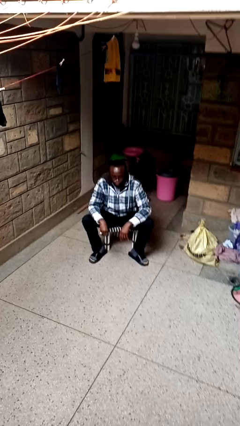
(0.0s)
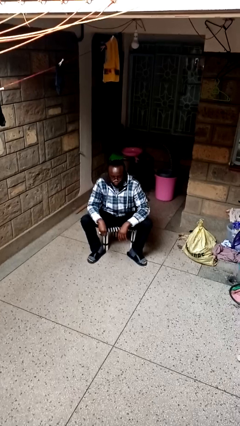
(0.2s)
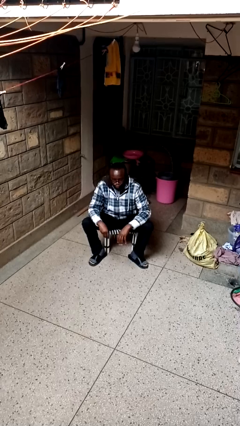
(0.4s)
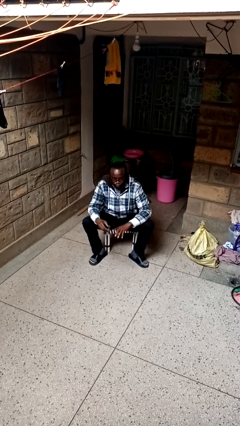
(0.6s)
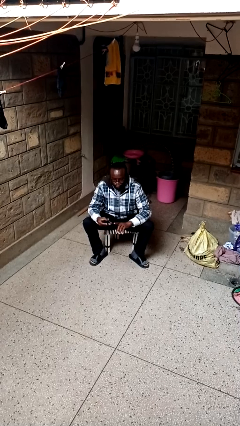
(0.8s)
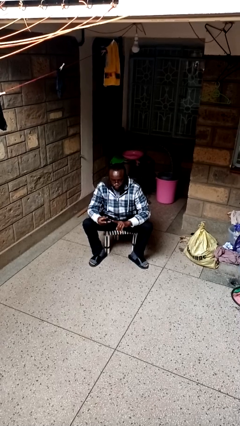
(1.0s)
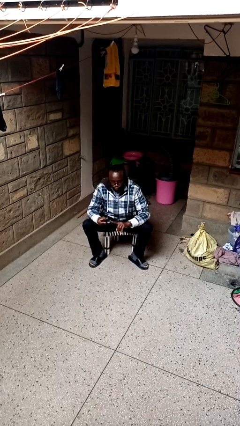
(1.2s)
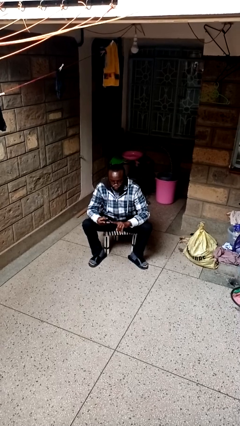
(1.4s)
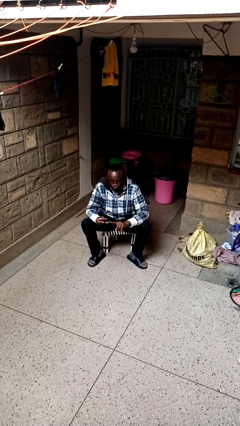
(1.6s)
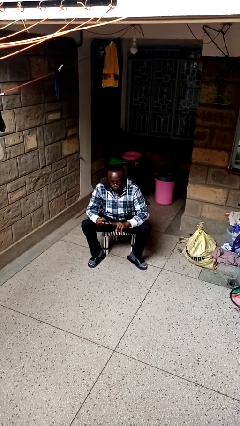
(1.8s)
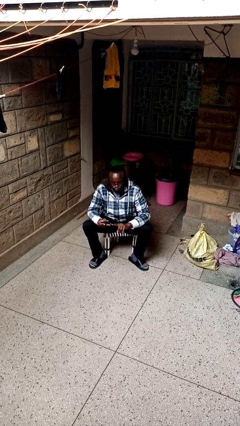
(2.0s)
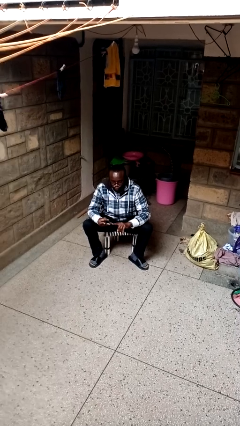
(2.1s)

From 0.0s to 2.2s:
person clips fingernails

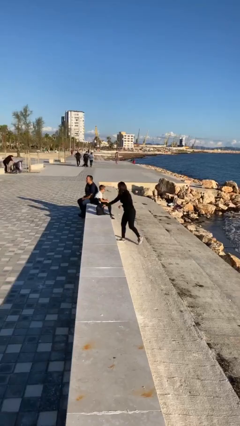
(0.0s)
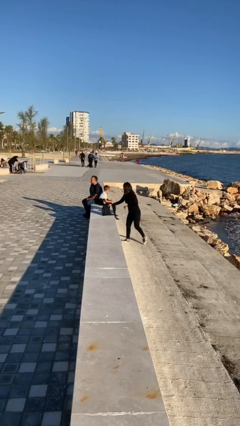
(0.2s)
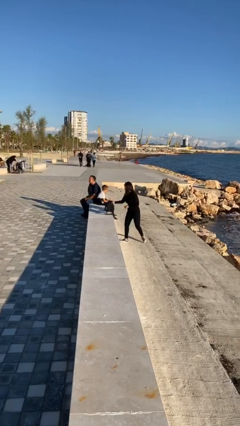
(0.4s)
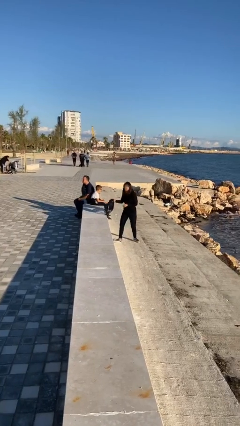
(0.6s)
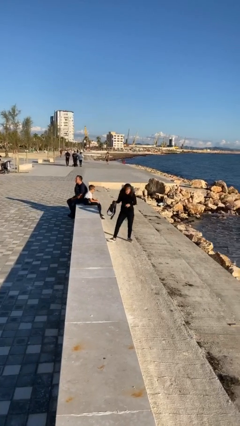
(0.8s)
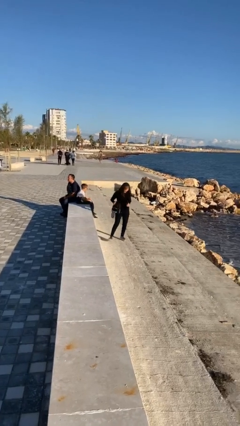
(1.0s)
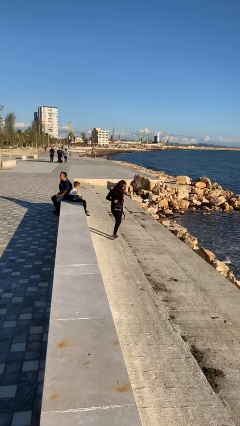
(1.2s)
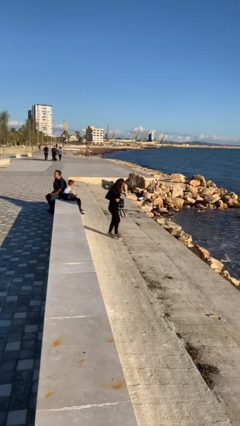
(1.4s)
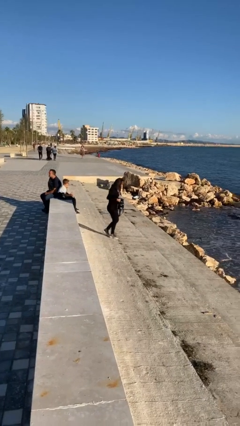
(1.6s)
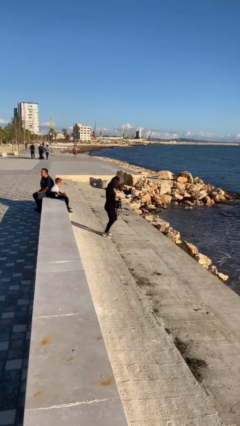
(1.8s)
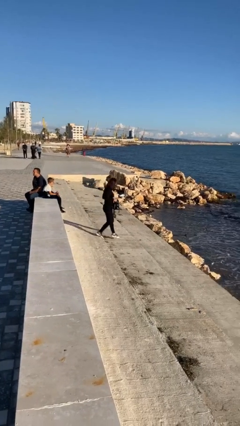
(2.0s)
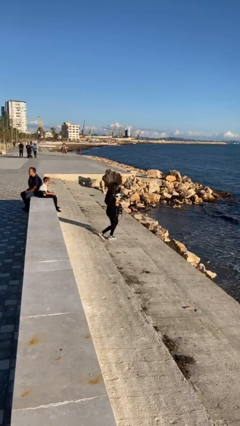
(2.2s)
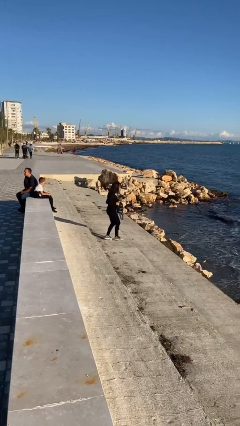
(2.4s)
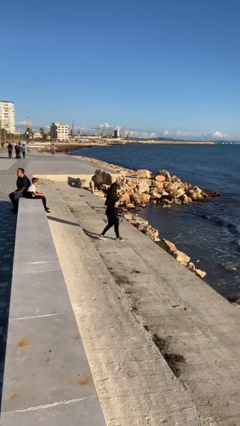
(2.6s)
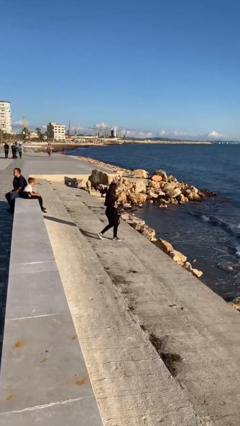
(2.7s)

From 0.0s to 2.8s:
person steals object from person

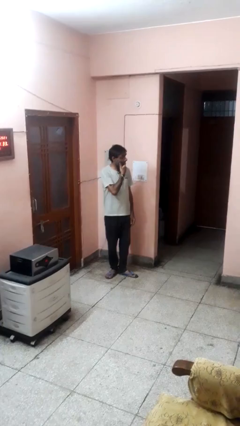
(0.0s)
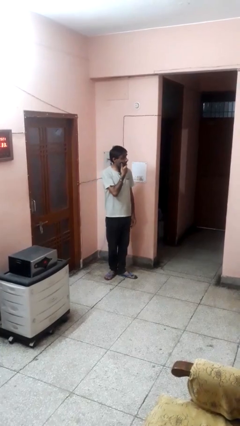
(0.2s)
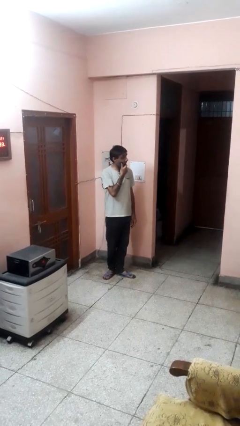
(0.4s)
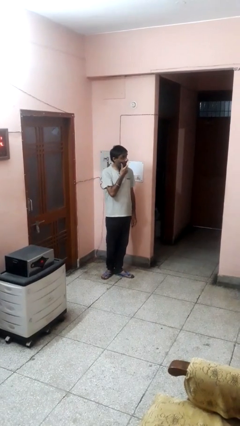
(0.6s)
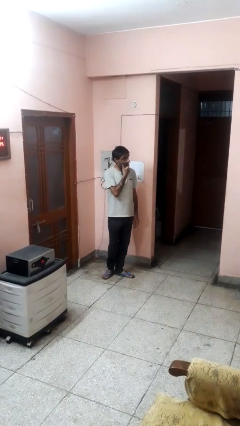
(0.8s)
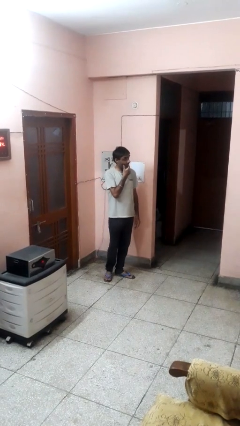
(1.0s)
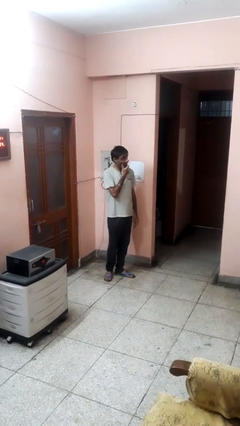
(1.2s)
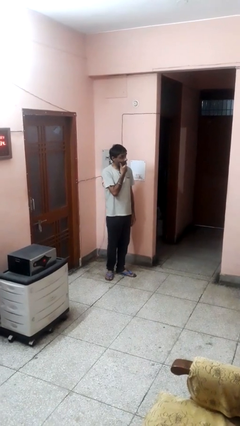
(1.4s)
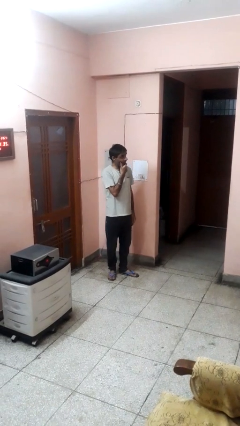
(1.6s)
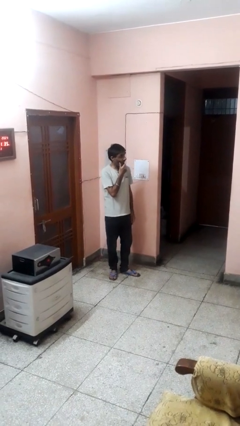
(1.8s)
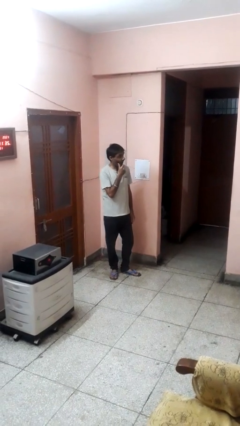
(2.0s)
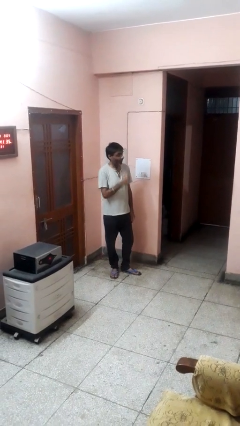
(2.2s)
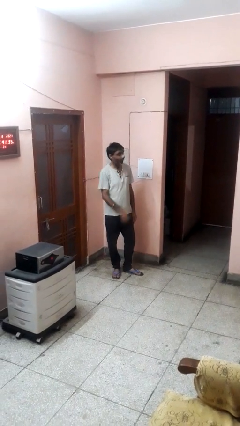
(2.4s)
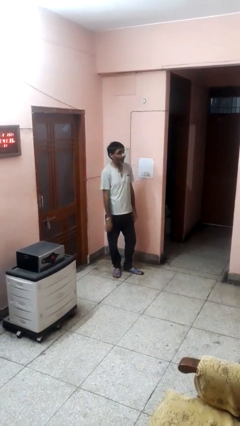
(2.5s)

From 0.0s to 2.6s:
person strokes chin

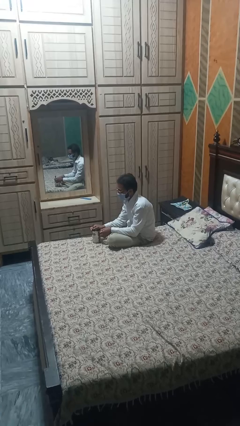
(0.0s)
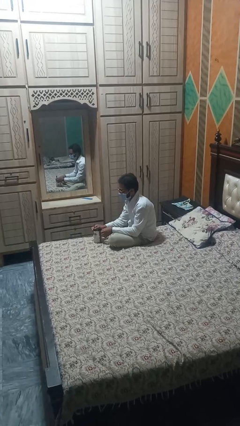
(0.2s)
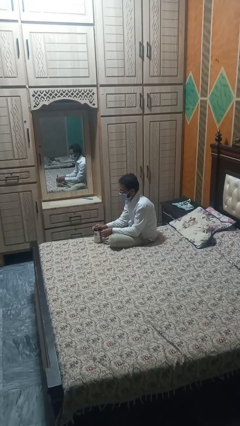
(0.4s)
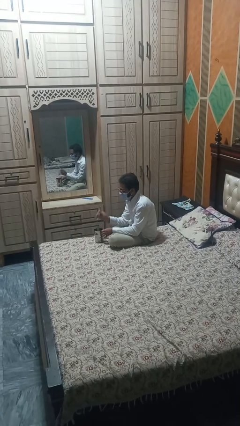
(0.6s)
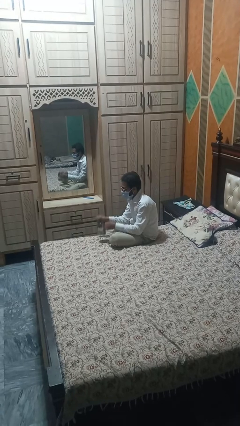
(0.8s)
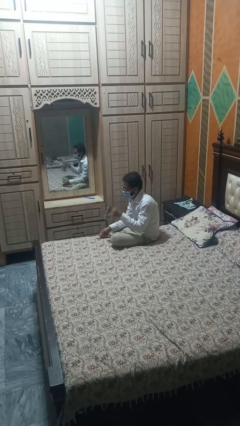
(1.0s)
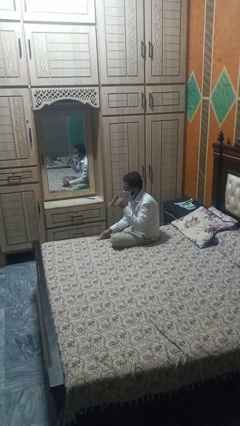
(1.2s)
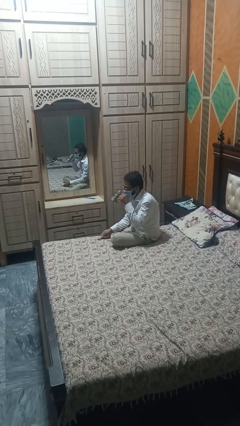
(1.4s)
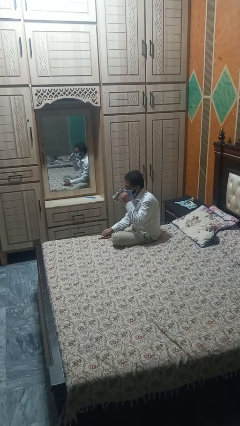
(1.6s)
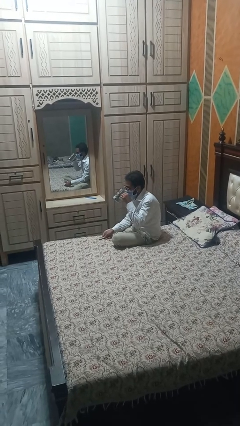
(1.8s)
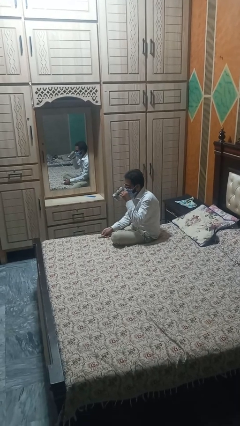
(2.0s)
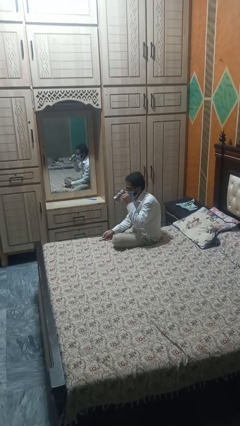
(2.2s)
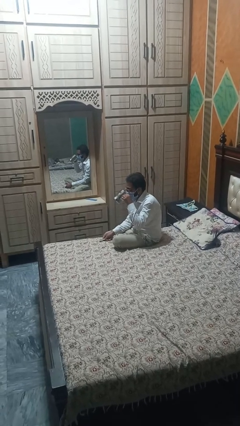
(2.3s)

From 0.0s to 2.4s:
person drinks from mug

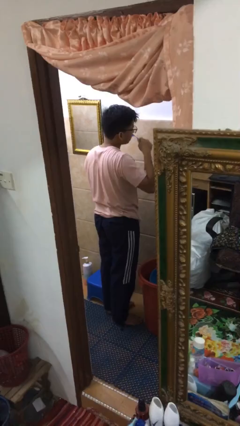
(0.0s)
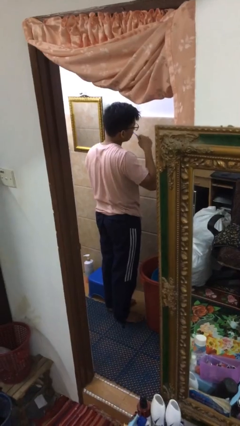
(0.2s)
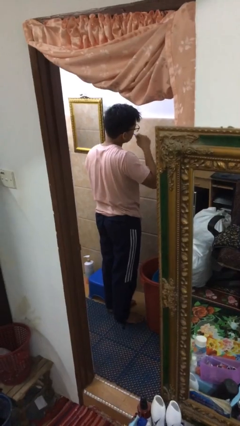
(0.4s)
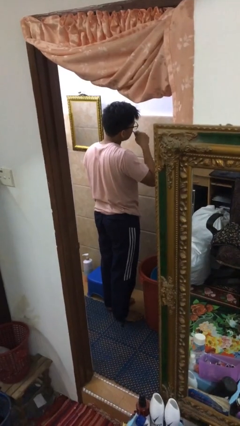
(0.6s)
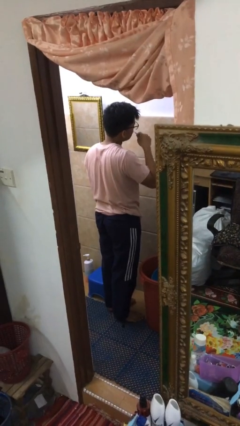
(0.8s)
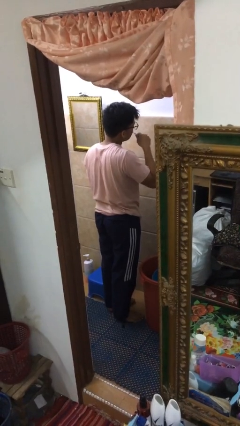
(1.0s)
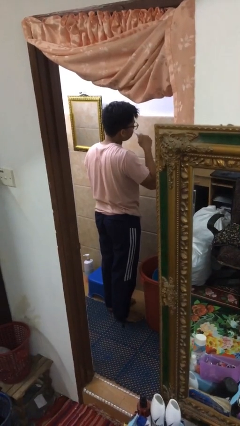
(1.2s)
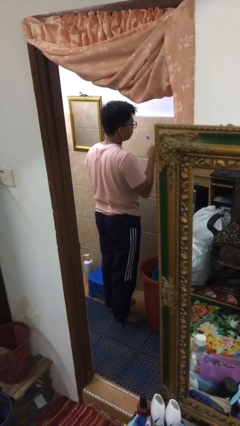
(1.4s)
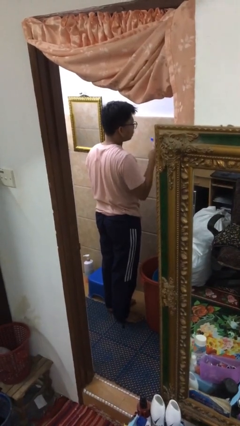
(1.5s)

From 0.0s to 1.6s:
person brushes teeth

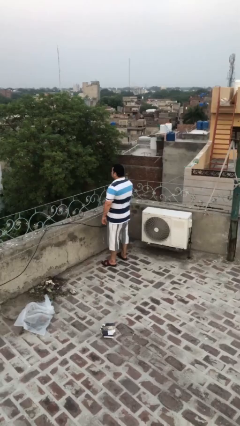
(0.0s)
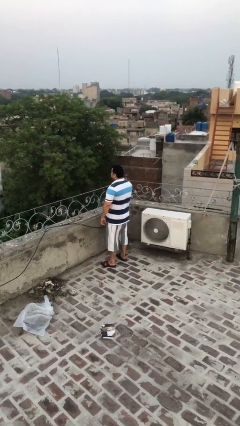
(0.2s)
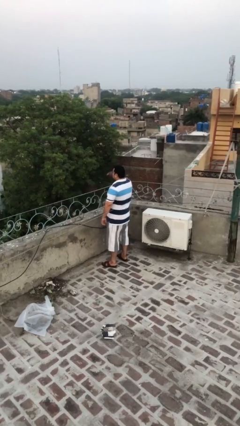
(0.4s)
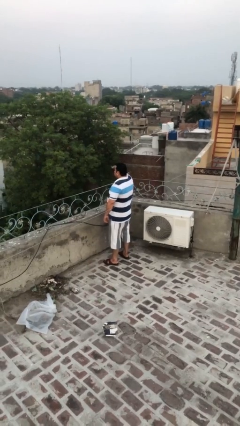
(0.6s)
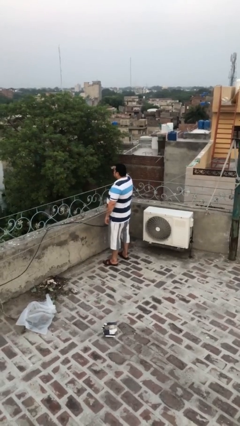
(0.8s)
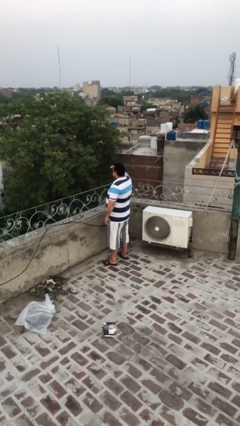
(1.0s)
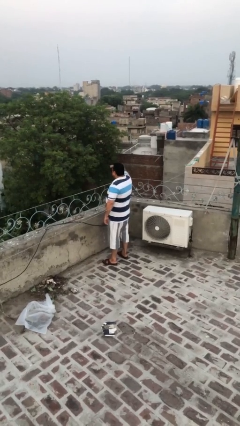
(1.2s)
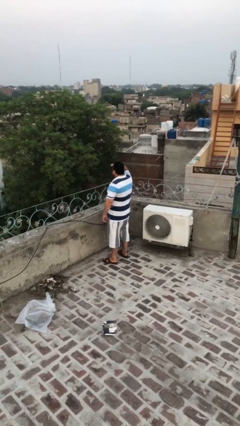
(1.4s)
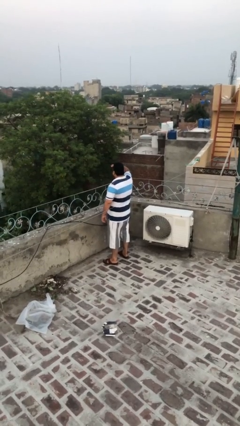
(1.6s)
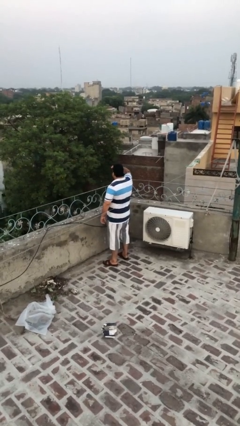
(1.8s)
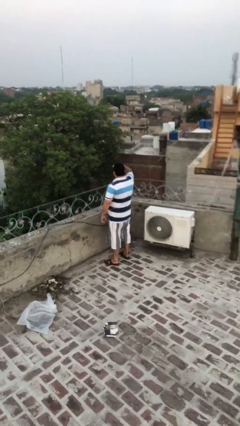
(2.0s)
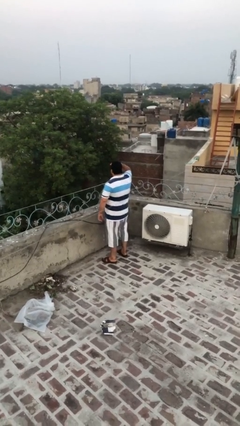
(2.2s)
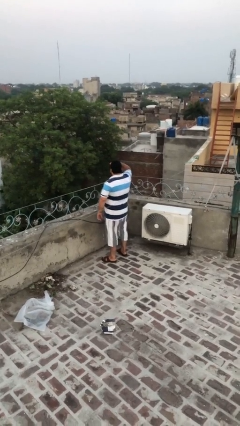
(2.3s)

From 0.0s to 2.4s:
person shades eyes

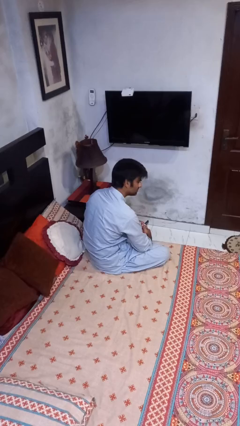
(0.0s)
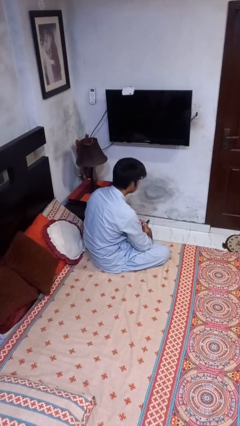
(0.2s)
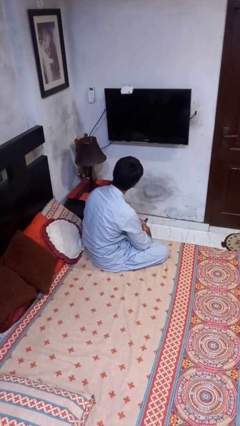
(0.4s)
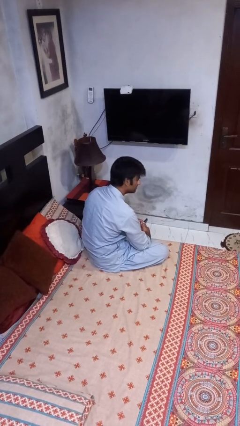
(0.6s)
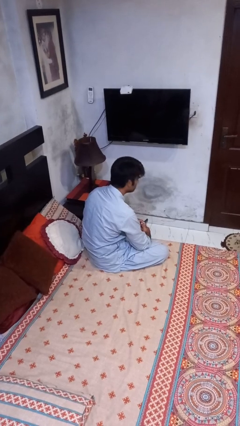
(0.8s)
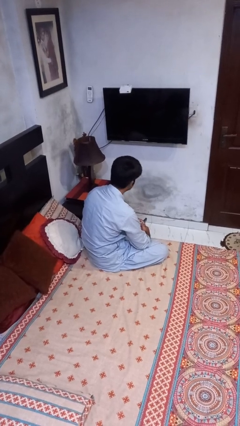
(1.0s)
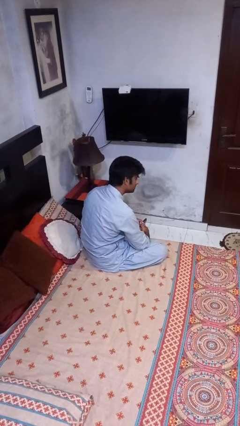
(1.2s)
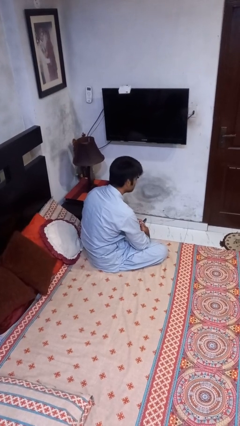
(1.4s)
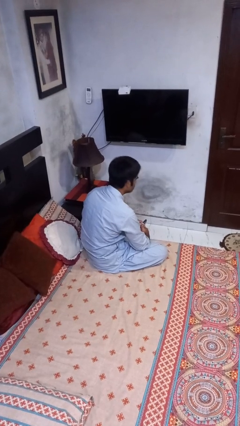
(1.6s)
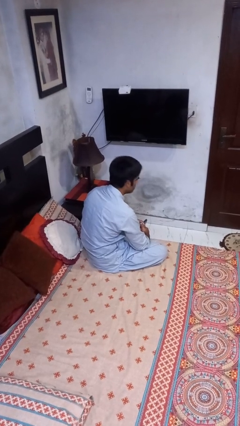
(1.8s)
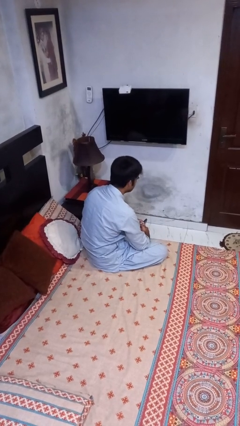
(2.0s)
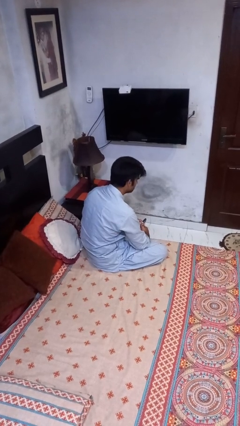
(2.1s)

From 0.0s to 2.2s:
person shakes head

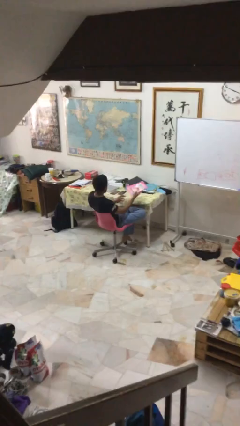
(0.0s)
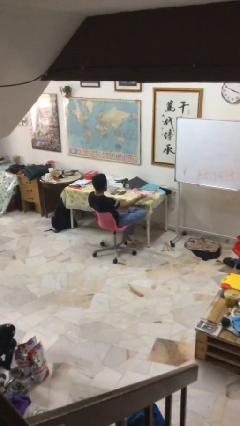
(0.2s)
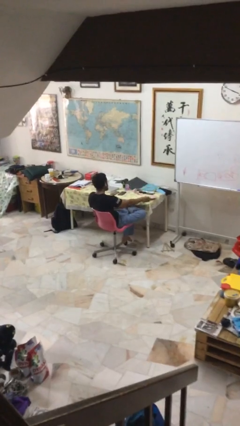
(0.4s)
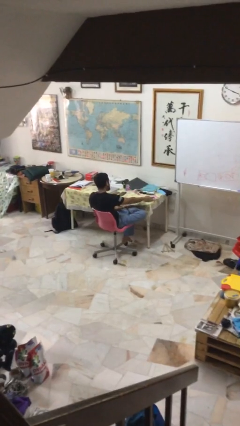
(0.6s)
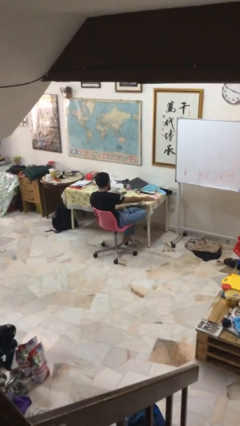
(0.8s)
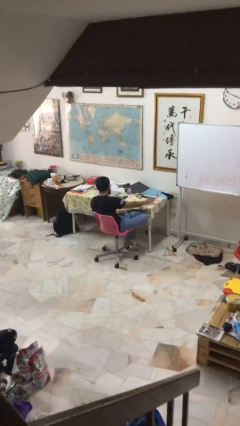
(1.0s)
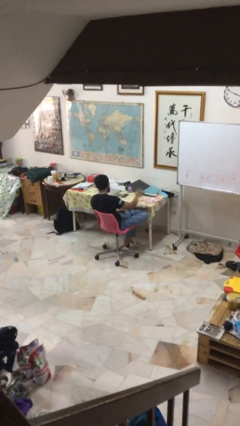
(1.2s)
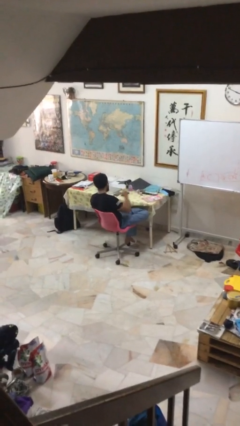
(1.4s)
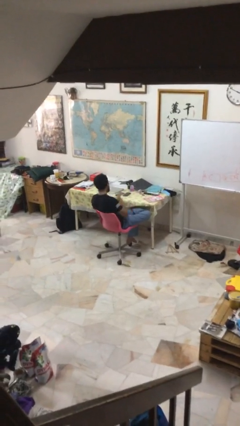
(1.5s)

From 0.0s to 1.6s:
person puts down object on table
